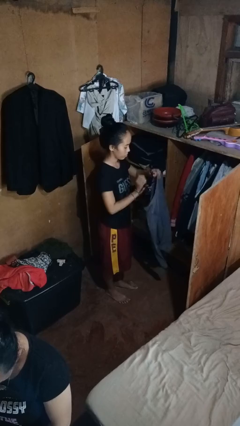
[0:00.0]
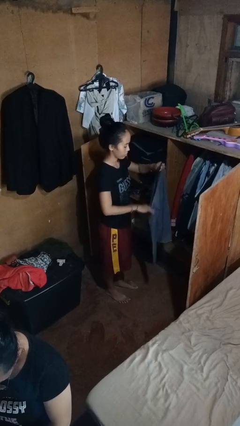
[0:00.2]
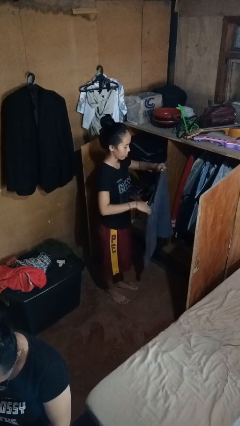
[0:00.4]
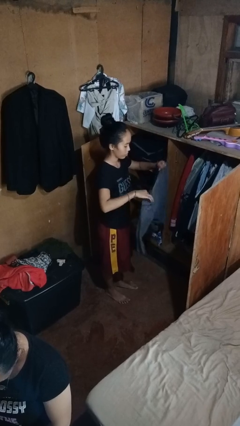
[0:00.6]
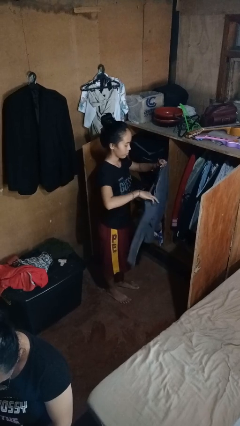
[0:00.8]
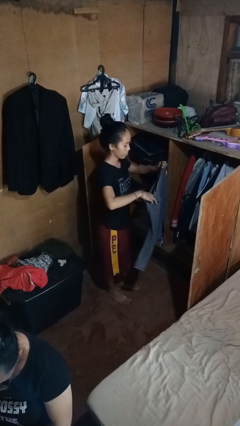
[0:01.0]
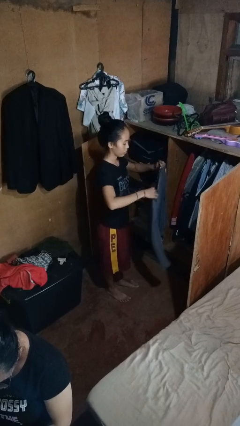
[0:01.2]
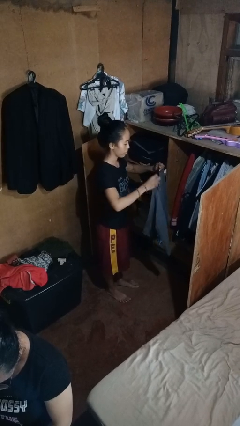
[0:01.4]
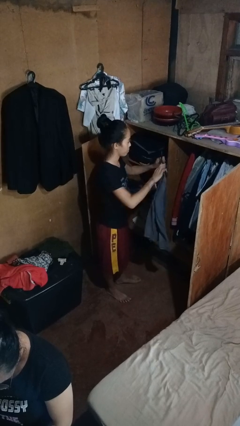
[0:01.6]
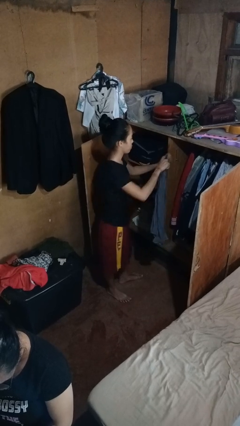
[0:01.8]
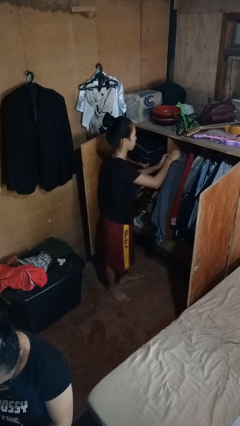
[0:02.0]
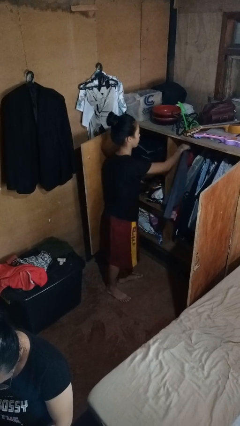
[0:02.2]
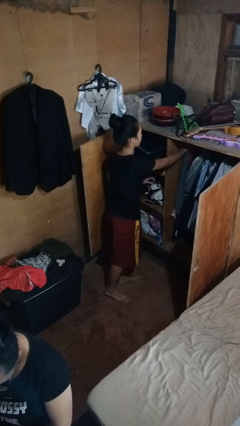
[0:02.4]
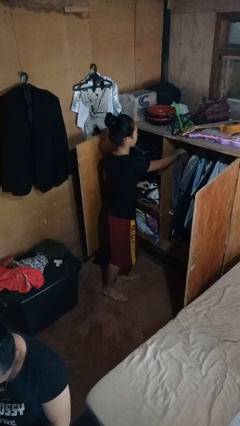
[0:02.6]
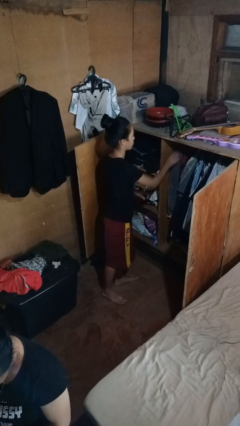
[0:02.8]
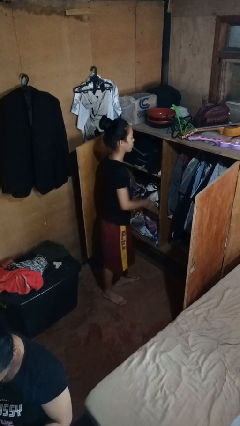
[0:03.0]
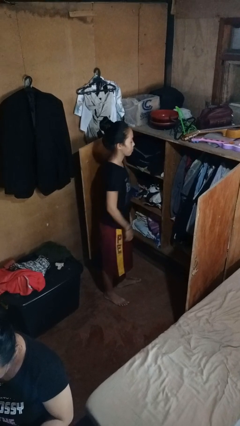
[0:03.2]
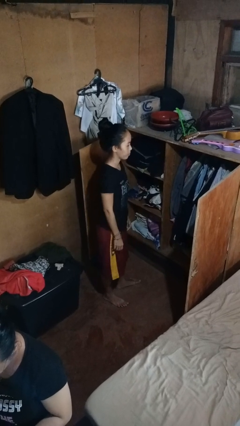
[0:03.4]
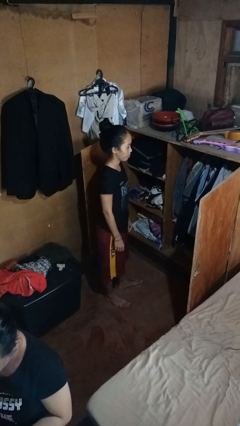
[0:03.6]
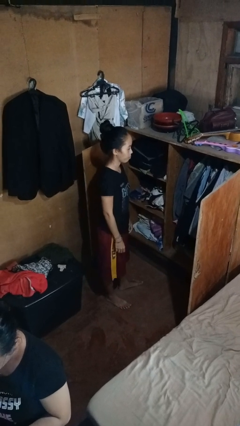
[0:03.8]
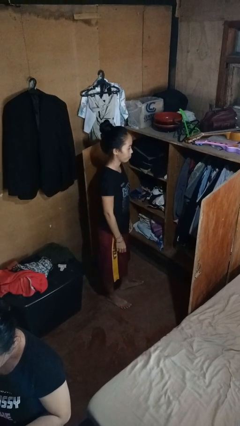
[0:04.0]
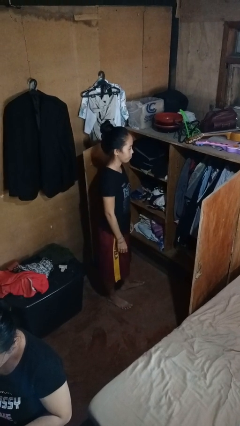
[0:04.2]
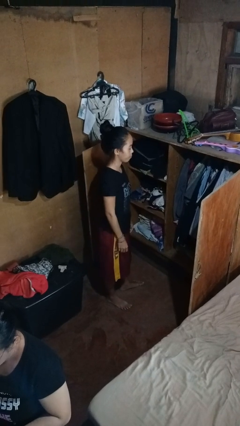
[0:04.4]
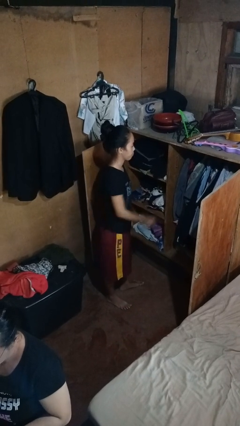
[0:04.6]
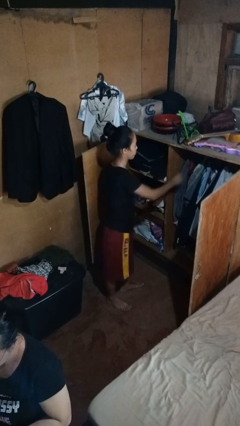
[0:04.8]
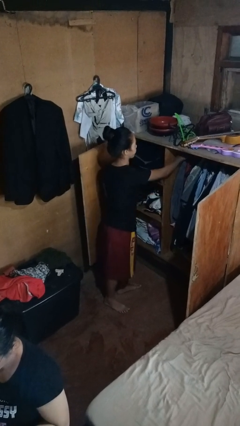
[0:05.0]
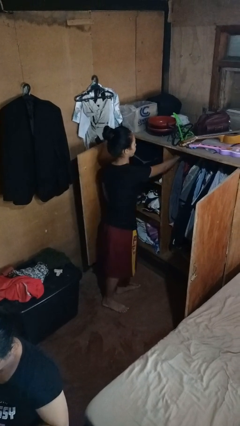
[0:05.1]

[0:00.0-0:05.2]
person puts clothes into closet

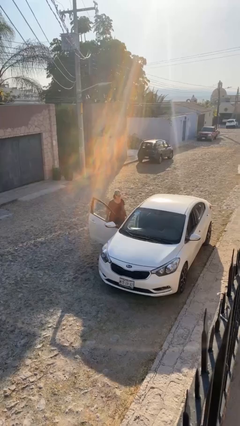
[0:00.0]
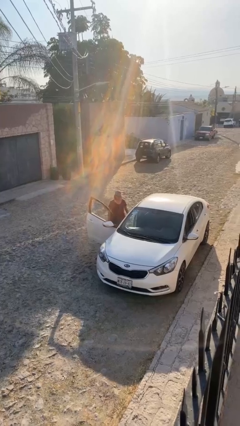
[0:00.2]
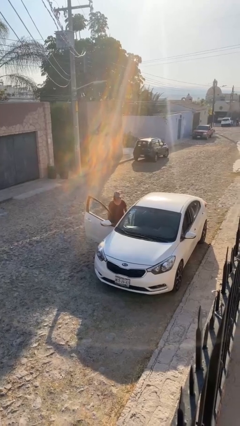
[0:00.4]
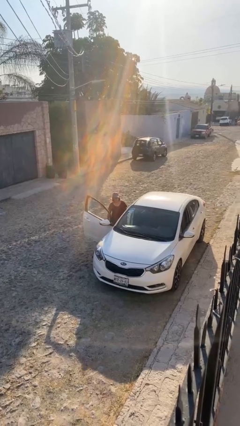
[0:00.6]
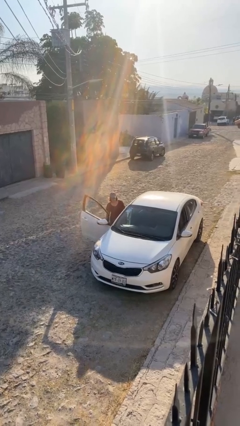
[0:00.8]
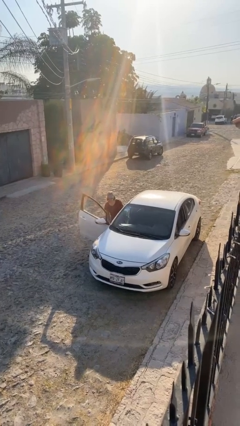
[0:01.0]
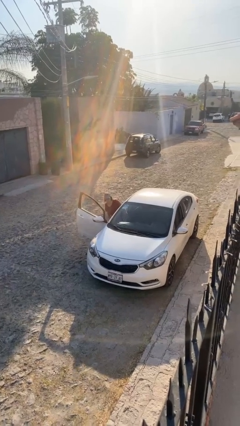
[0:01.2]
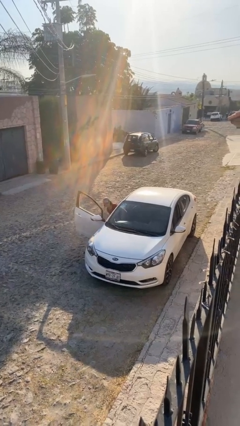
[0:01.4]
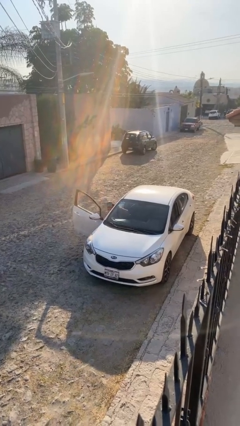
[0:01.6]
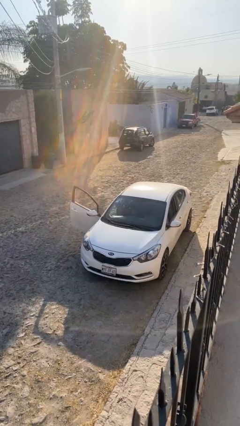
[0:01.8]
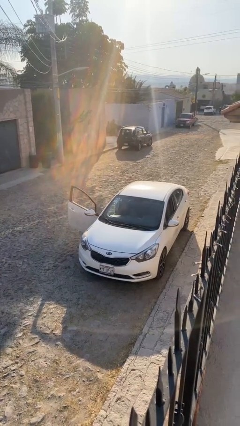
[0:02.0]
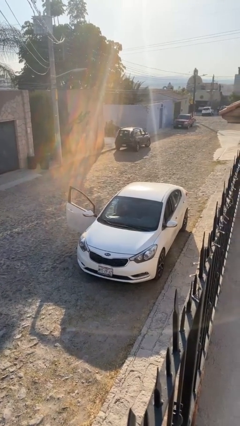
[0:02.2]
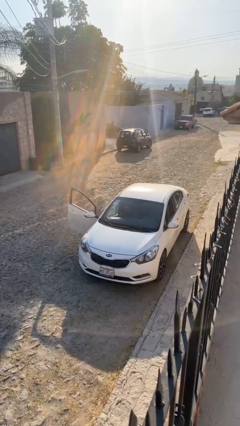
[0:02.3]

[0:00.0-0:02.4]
person enters car

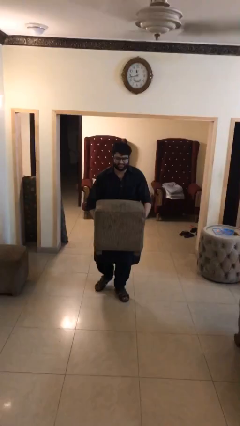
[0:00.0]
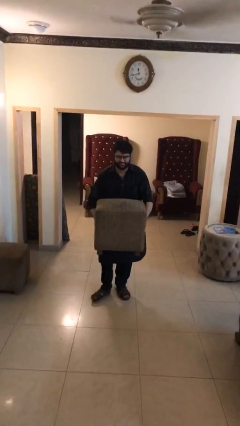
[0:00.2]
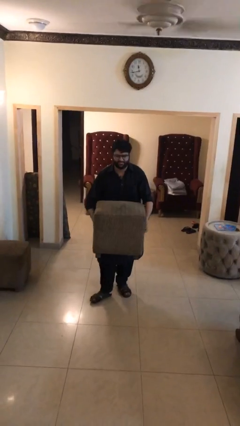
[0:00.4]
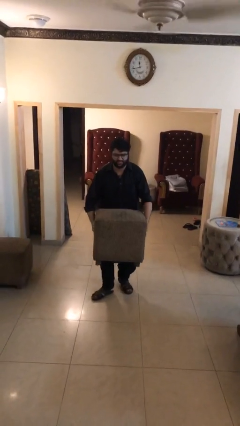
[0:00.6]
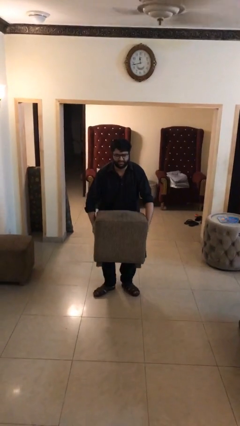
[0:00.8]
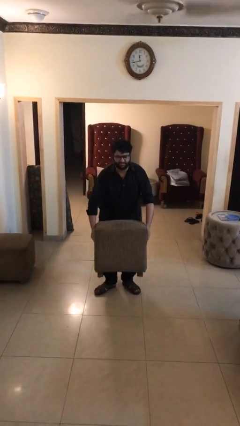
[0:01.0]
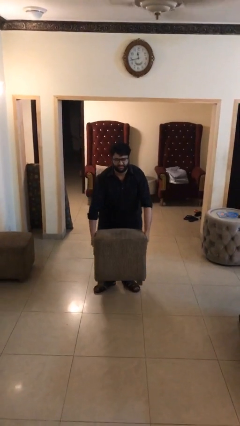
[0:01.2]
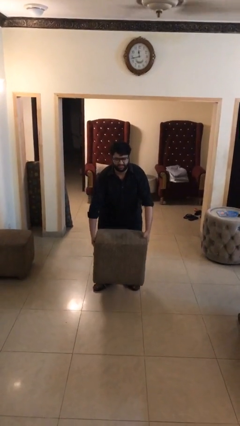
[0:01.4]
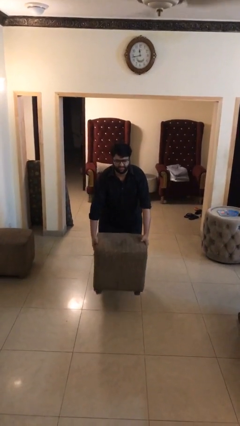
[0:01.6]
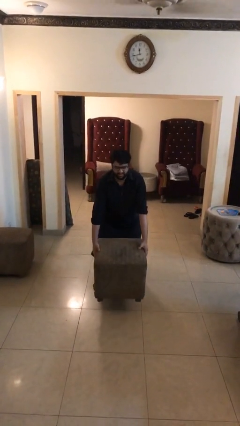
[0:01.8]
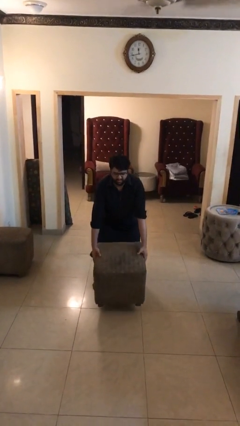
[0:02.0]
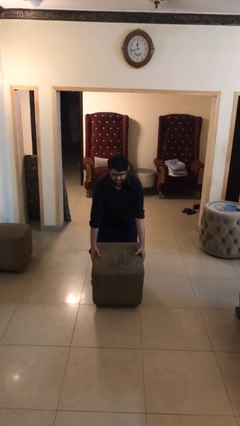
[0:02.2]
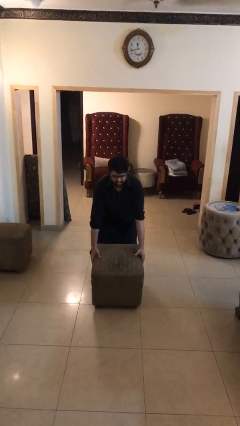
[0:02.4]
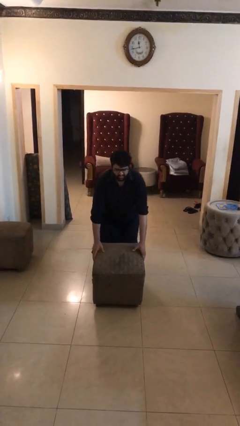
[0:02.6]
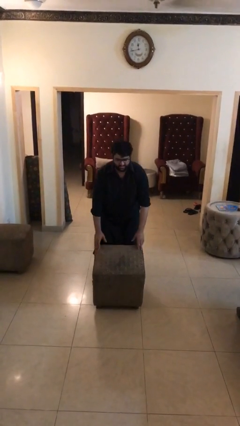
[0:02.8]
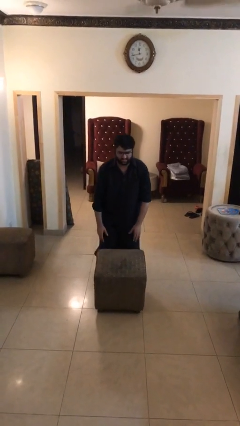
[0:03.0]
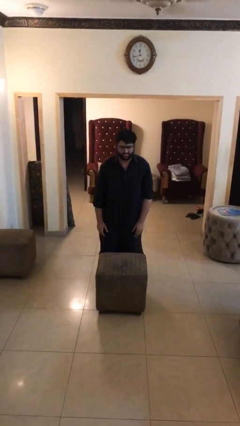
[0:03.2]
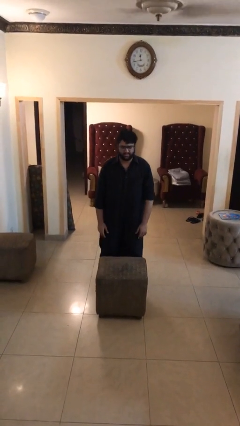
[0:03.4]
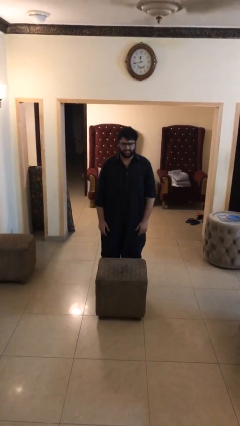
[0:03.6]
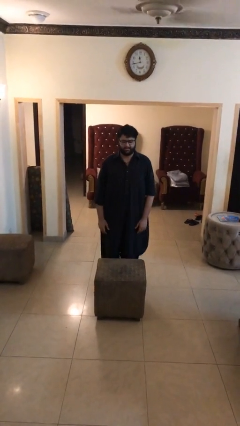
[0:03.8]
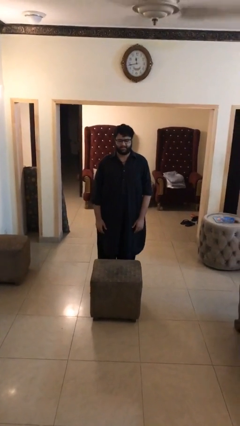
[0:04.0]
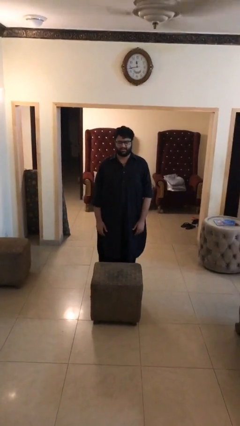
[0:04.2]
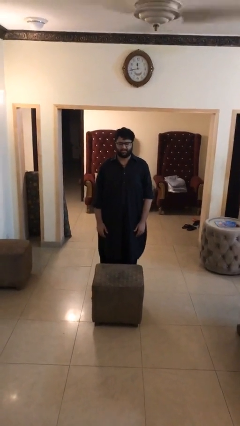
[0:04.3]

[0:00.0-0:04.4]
person puts down object on floor

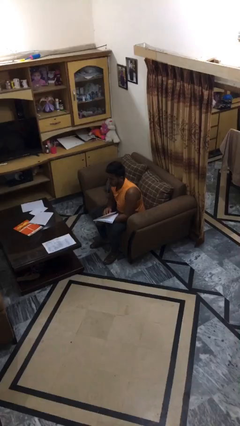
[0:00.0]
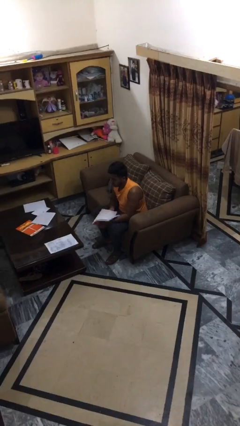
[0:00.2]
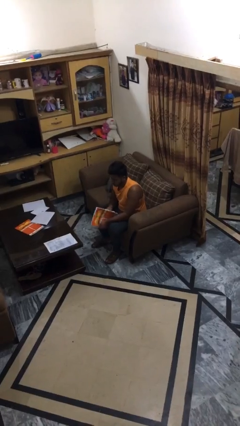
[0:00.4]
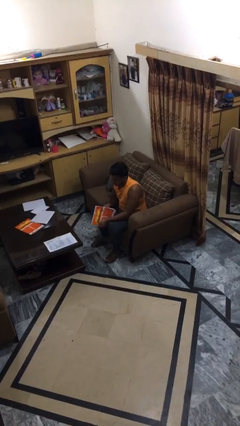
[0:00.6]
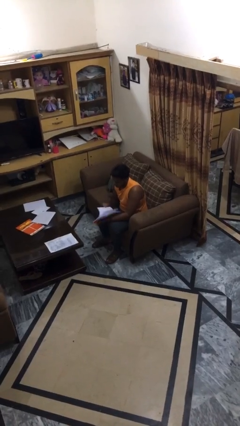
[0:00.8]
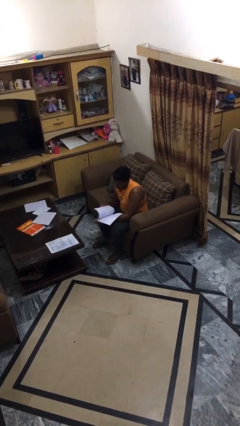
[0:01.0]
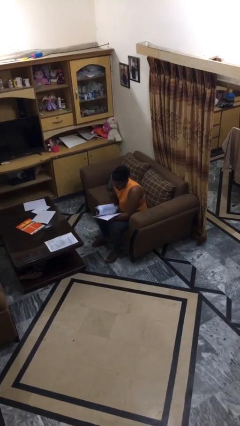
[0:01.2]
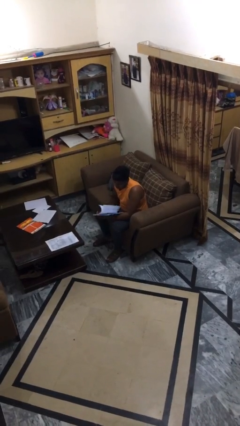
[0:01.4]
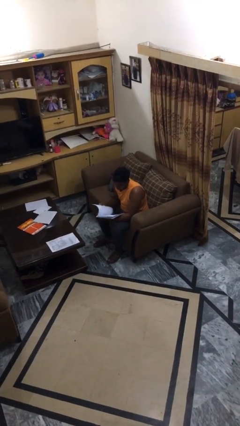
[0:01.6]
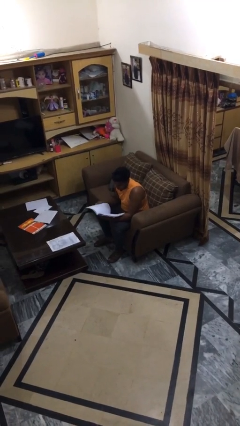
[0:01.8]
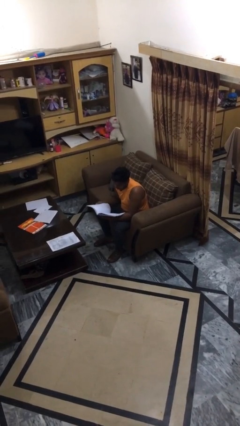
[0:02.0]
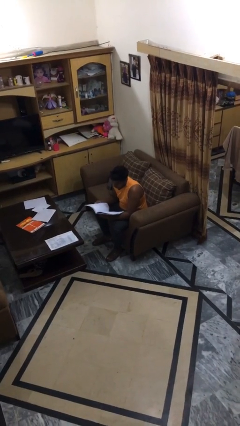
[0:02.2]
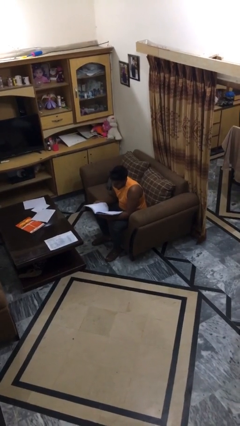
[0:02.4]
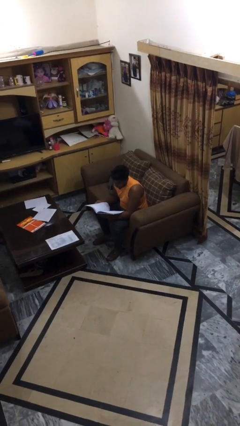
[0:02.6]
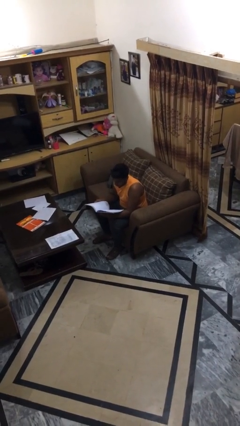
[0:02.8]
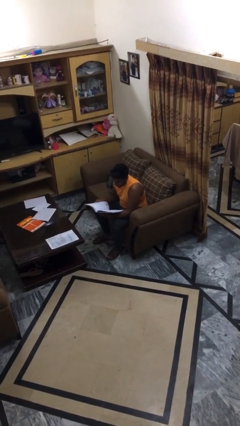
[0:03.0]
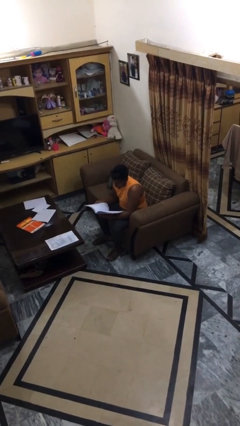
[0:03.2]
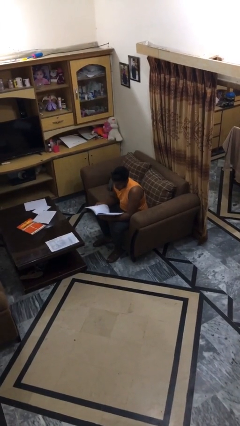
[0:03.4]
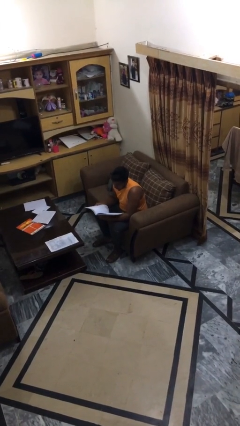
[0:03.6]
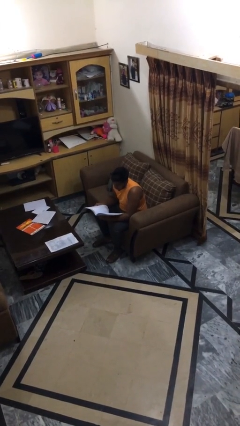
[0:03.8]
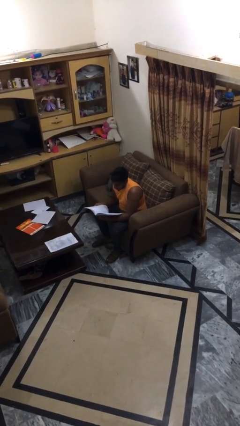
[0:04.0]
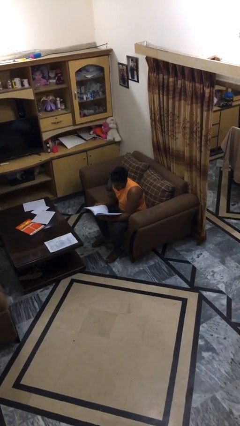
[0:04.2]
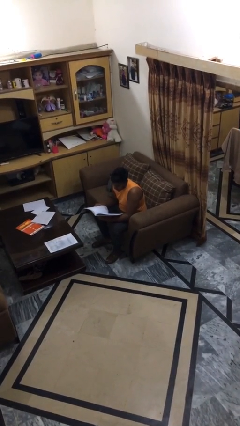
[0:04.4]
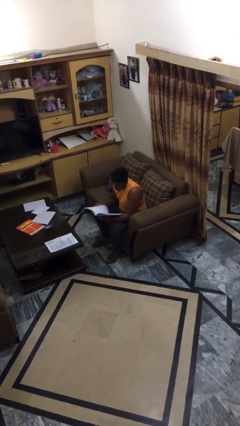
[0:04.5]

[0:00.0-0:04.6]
person reads document

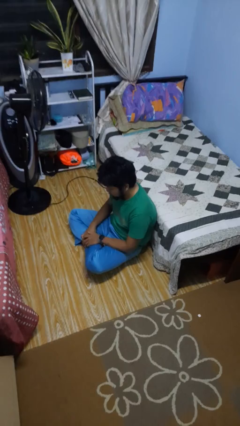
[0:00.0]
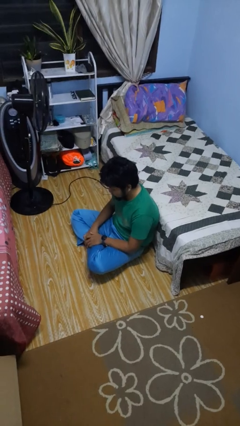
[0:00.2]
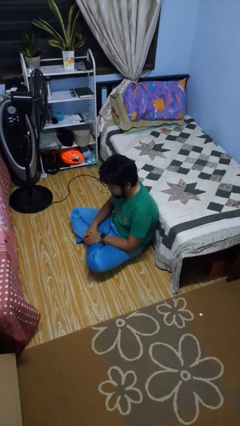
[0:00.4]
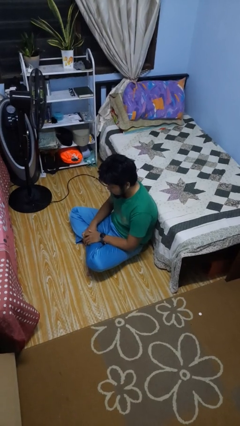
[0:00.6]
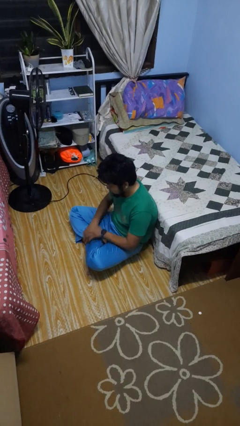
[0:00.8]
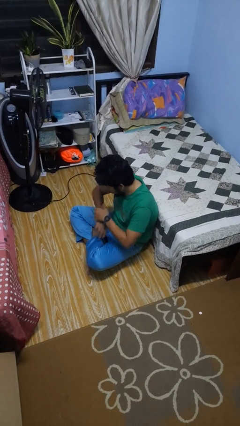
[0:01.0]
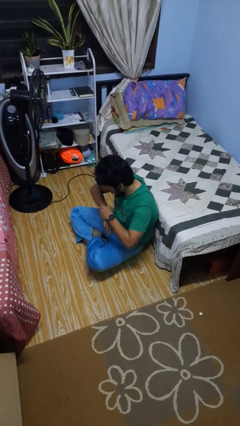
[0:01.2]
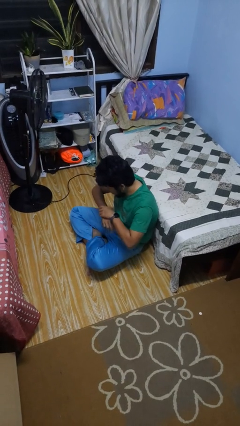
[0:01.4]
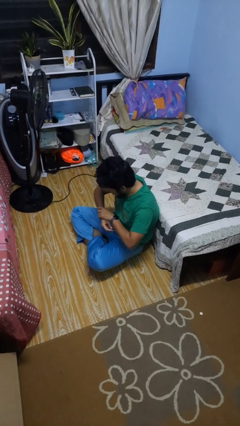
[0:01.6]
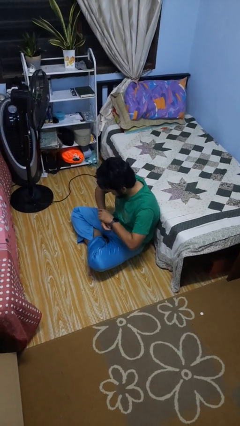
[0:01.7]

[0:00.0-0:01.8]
person looks at hands in lap
